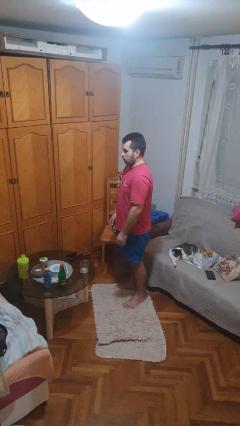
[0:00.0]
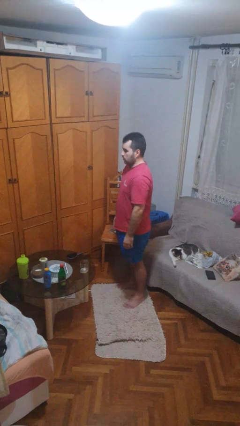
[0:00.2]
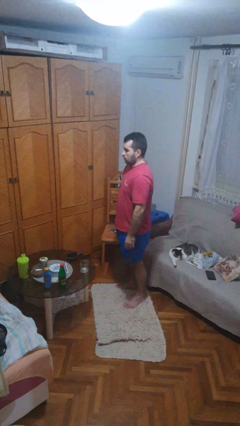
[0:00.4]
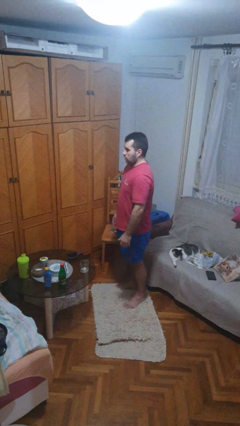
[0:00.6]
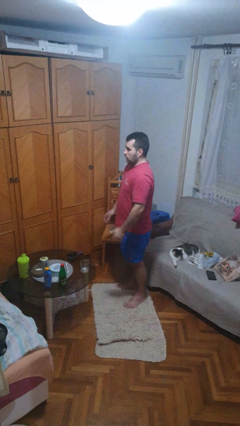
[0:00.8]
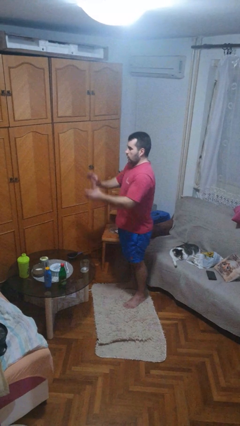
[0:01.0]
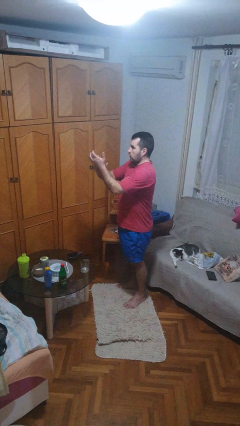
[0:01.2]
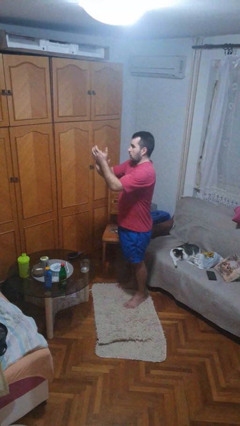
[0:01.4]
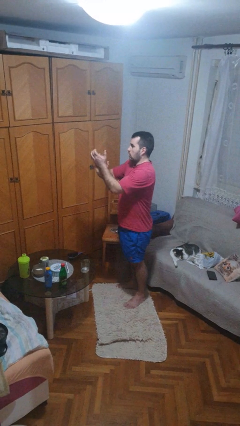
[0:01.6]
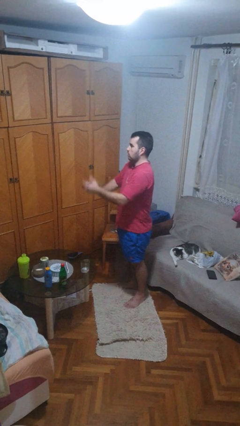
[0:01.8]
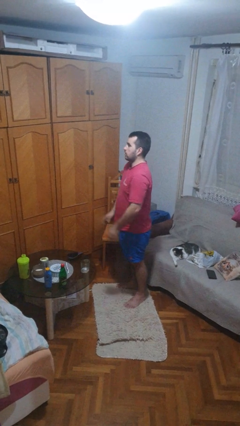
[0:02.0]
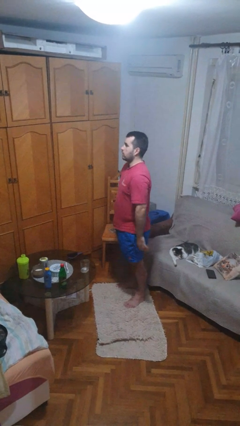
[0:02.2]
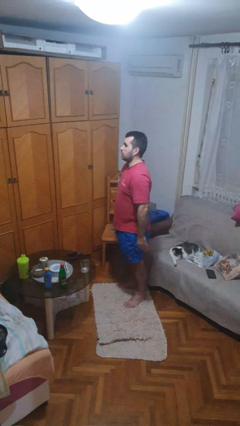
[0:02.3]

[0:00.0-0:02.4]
person claps hands

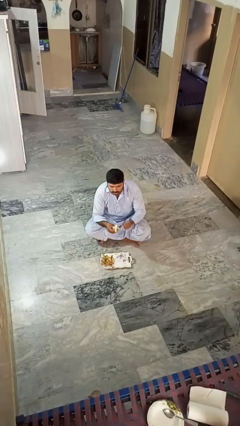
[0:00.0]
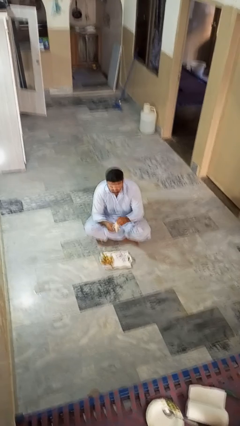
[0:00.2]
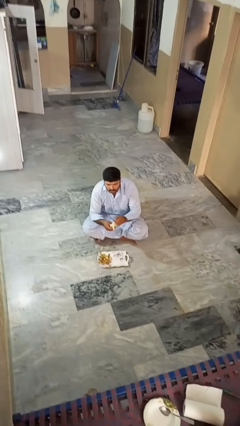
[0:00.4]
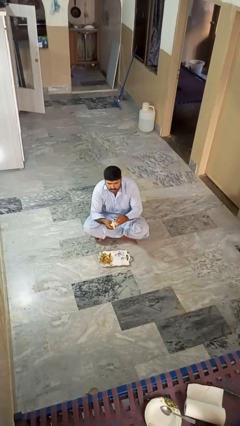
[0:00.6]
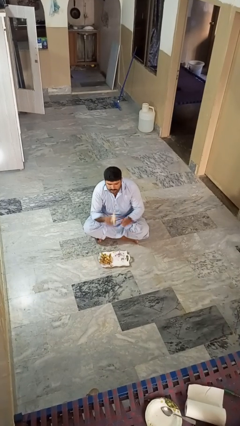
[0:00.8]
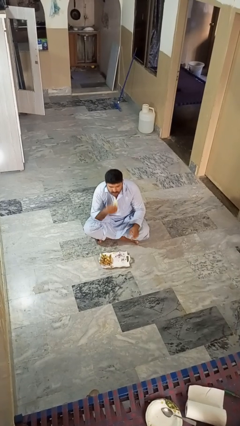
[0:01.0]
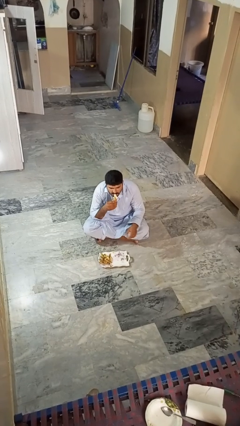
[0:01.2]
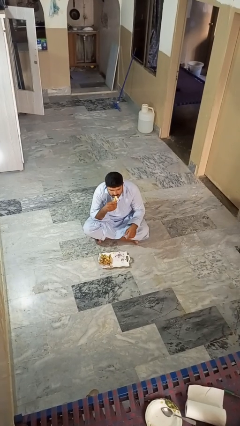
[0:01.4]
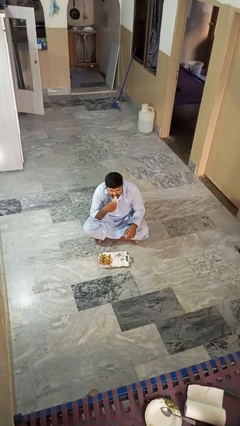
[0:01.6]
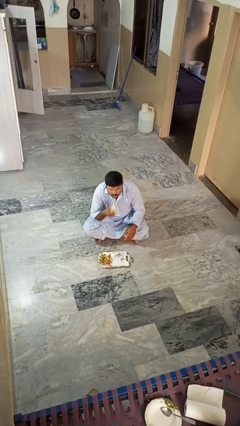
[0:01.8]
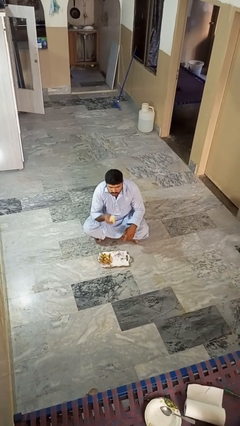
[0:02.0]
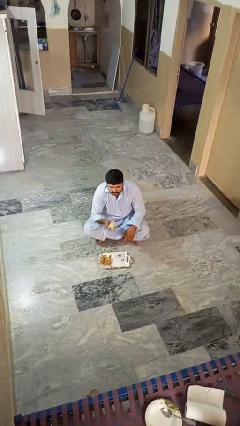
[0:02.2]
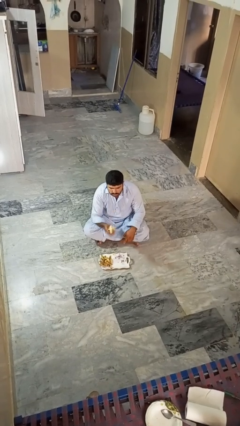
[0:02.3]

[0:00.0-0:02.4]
person eats banana

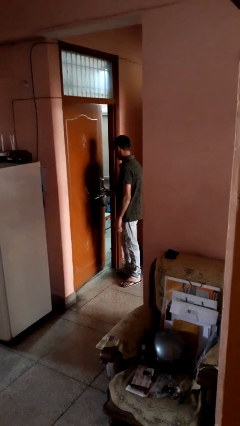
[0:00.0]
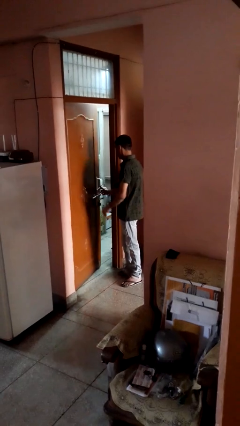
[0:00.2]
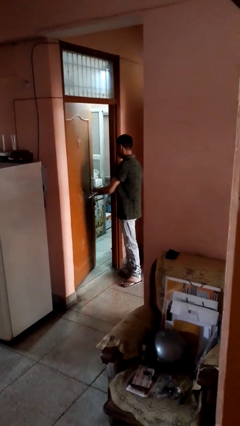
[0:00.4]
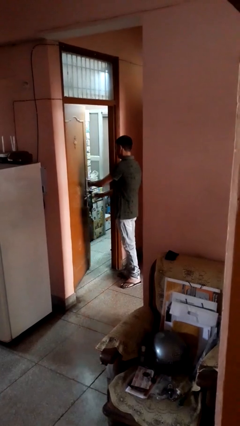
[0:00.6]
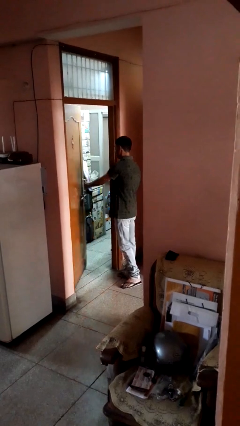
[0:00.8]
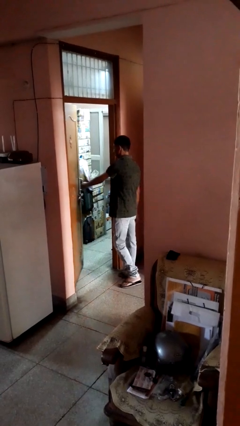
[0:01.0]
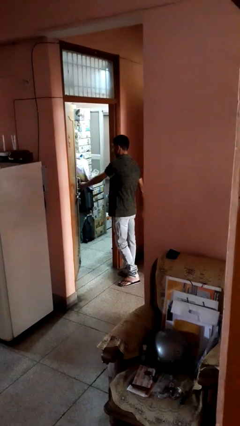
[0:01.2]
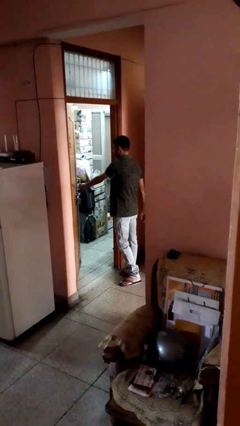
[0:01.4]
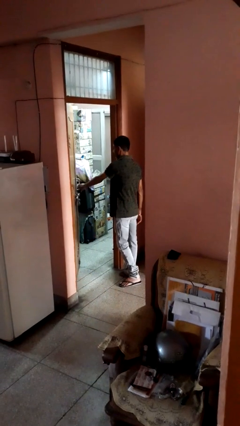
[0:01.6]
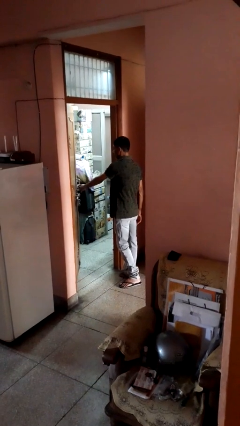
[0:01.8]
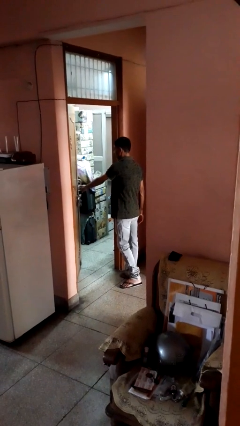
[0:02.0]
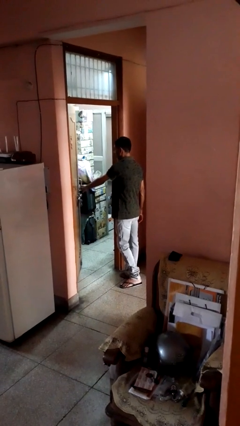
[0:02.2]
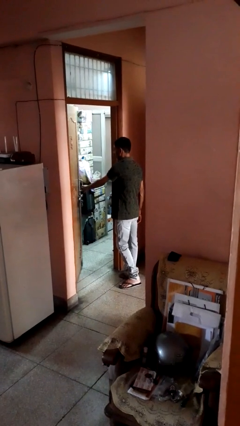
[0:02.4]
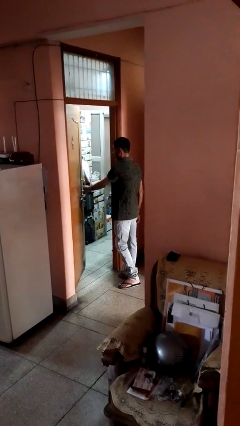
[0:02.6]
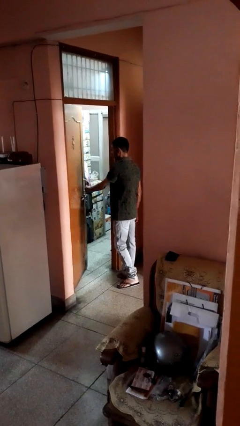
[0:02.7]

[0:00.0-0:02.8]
person opens facility door

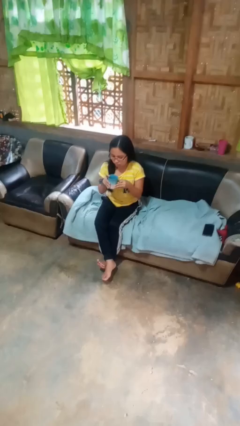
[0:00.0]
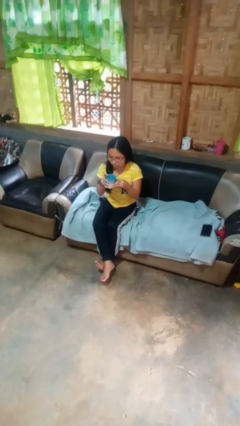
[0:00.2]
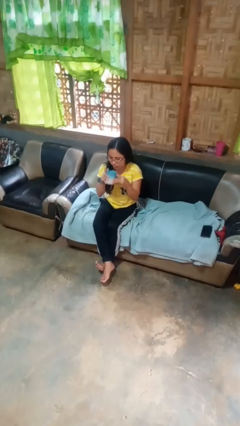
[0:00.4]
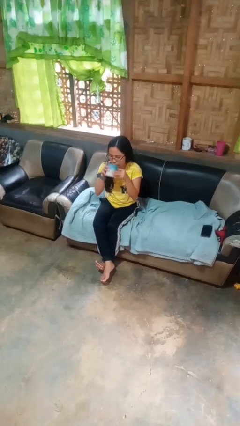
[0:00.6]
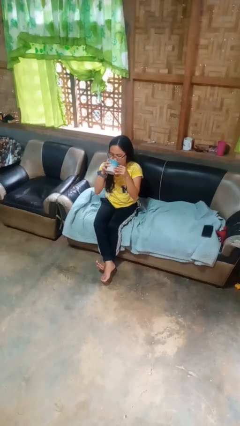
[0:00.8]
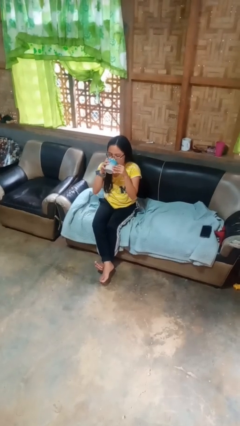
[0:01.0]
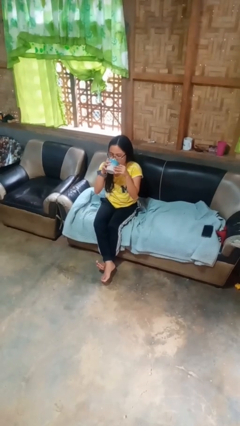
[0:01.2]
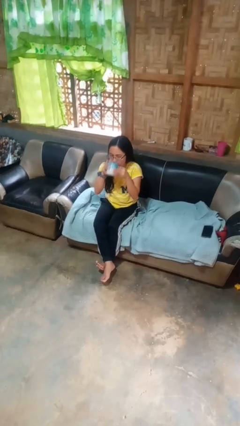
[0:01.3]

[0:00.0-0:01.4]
person drinks from mug

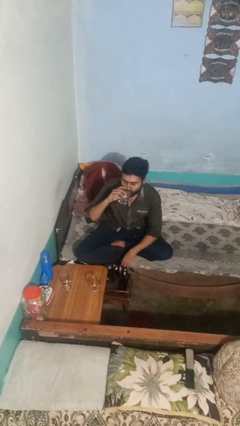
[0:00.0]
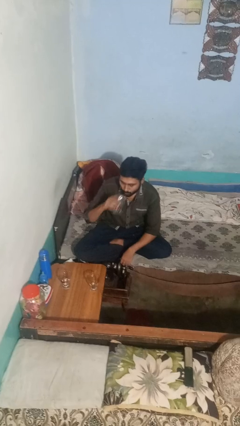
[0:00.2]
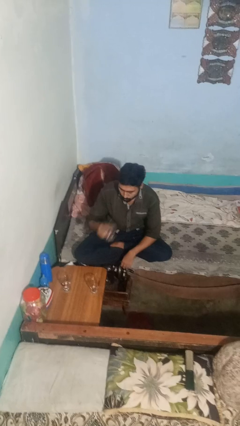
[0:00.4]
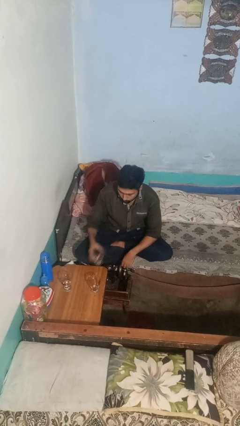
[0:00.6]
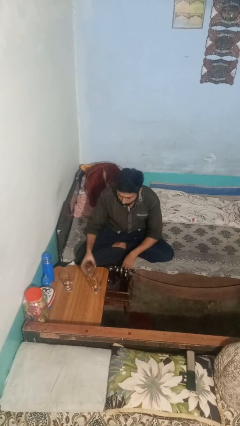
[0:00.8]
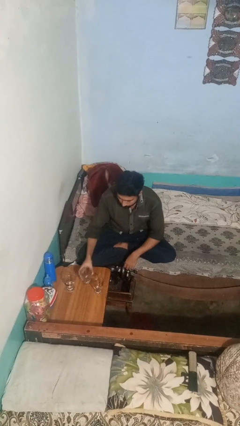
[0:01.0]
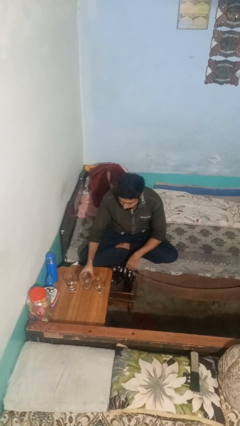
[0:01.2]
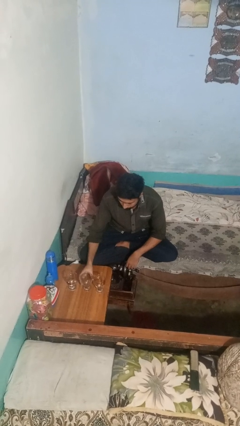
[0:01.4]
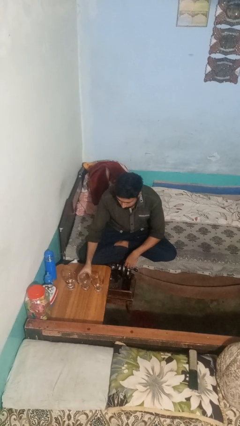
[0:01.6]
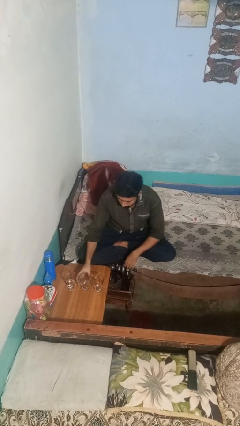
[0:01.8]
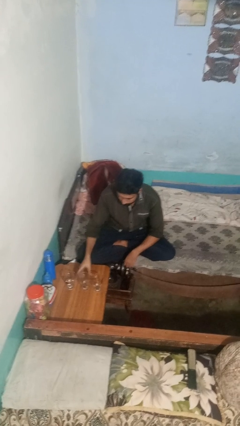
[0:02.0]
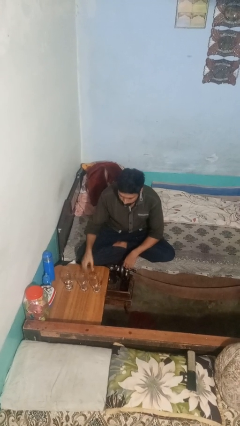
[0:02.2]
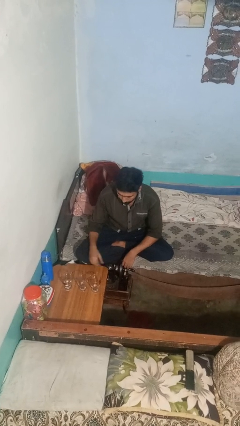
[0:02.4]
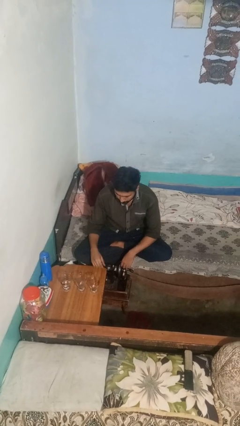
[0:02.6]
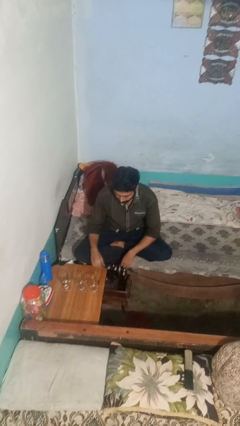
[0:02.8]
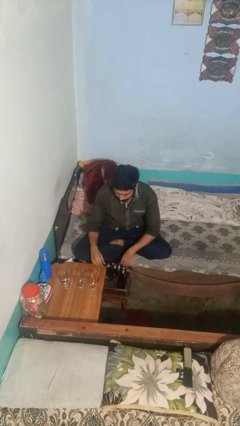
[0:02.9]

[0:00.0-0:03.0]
person puts down object on table

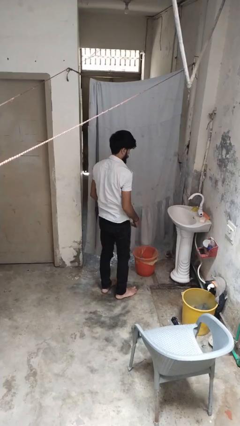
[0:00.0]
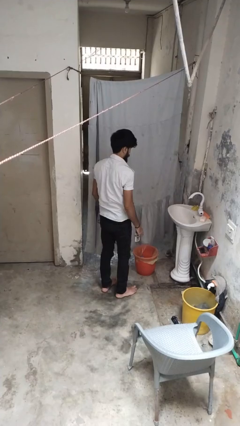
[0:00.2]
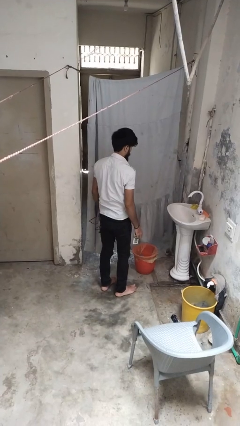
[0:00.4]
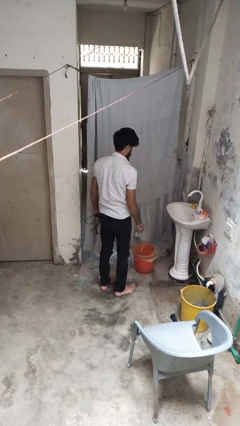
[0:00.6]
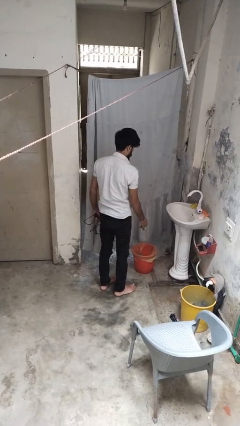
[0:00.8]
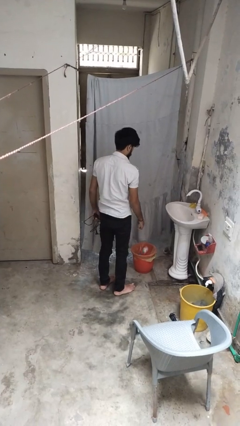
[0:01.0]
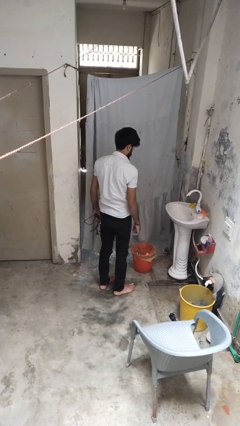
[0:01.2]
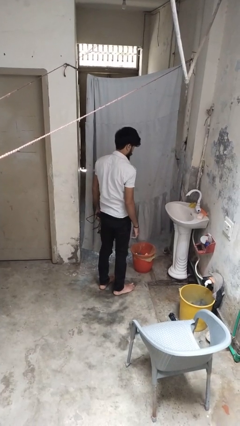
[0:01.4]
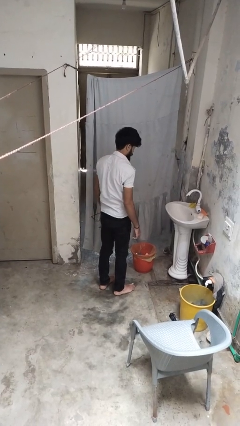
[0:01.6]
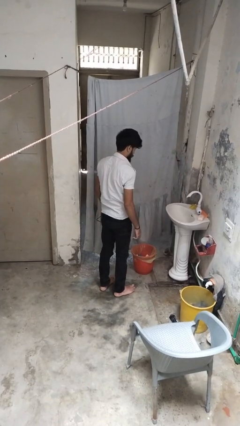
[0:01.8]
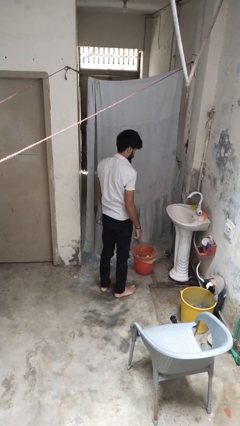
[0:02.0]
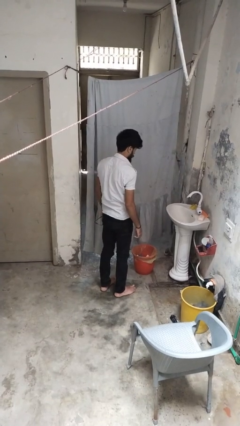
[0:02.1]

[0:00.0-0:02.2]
person discards trash

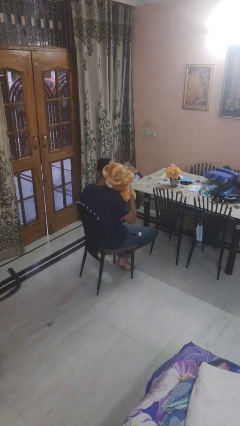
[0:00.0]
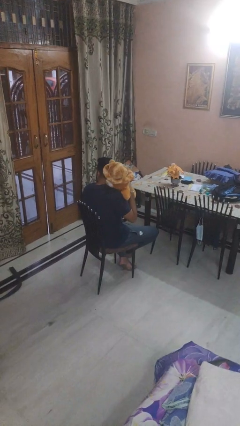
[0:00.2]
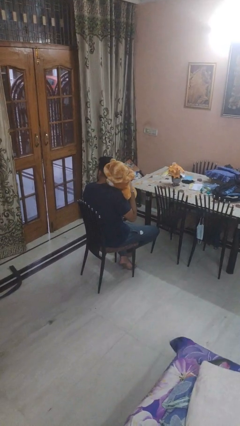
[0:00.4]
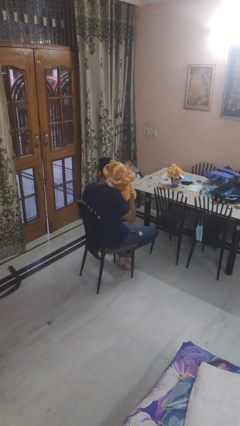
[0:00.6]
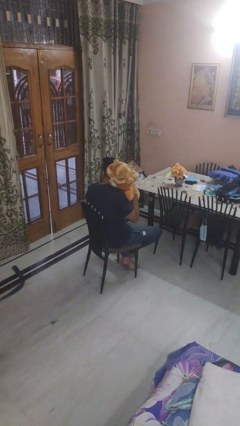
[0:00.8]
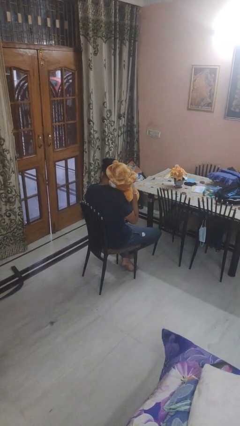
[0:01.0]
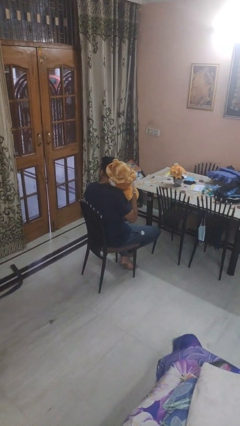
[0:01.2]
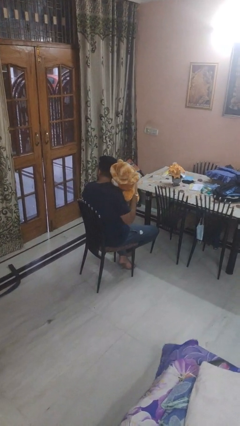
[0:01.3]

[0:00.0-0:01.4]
person hugs stuffed animal

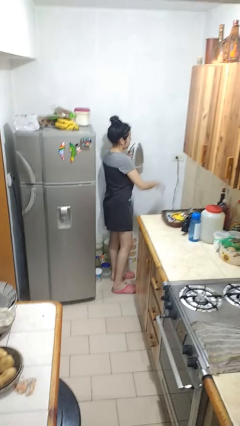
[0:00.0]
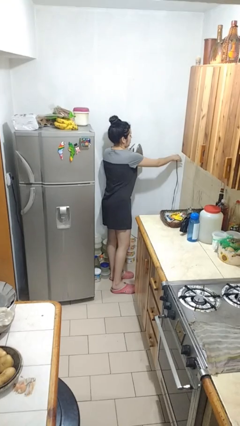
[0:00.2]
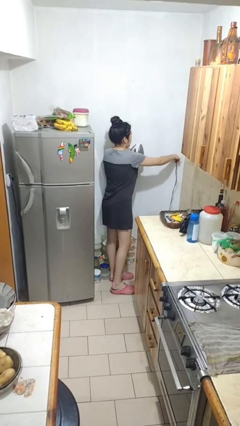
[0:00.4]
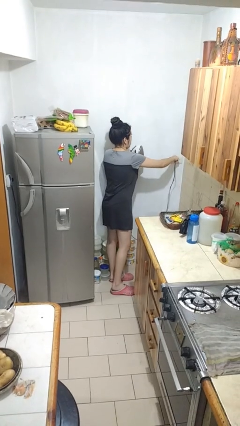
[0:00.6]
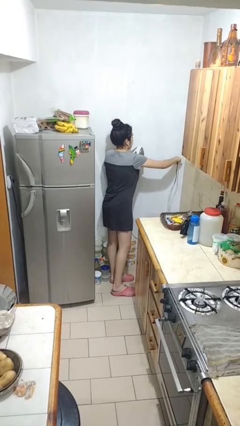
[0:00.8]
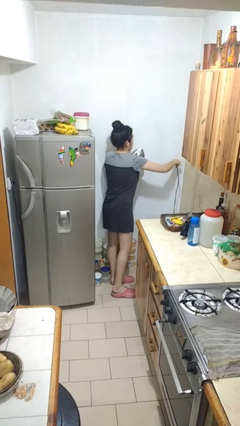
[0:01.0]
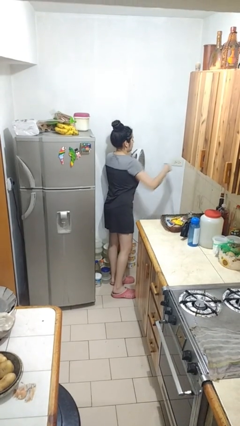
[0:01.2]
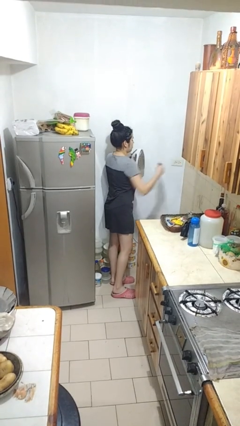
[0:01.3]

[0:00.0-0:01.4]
person unplugs from electrical socket
